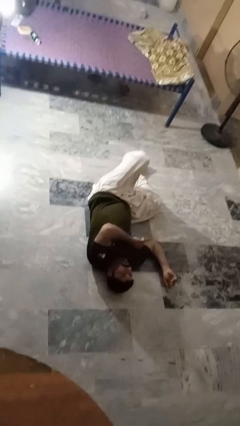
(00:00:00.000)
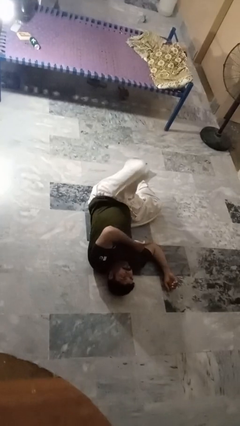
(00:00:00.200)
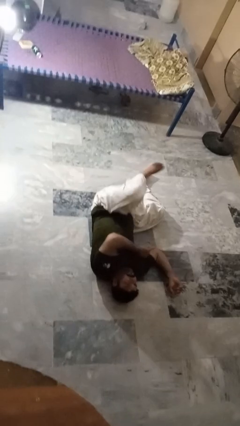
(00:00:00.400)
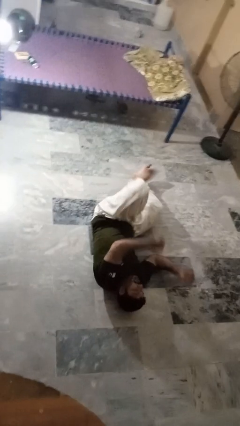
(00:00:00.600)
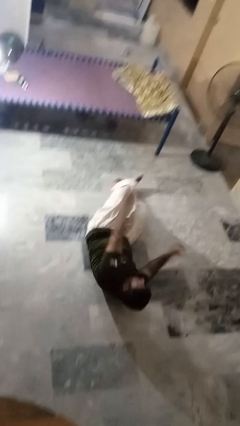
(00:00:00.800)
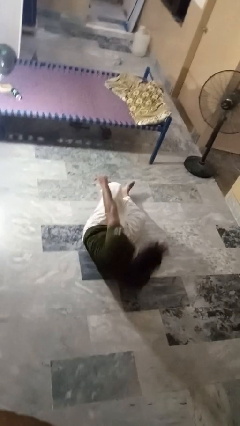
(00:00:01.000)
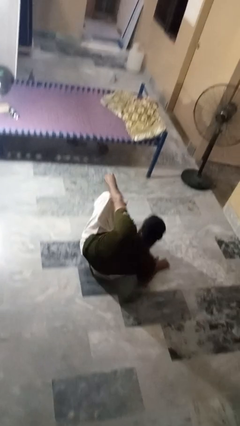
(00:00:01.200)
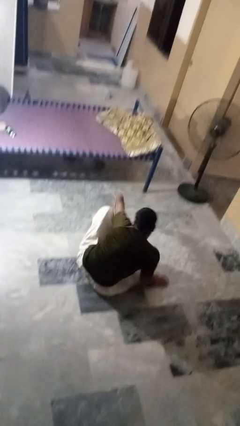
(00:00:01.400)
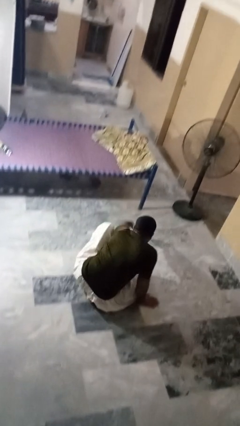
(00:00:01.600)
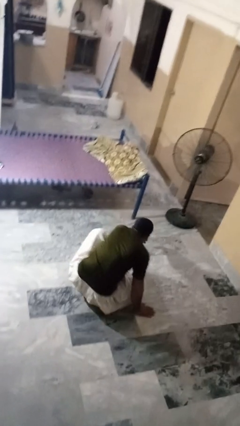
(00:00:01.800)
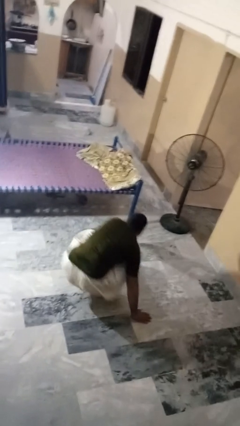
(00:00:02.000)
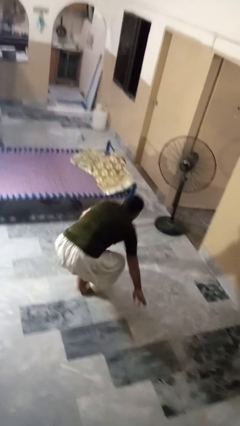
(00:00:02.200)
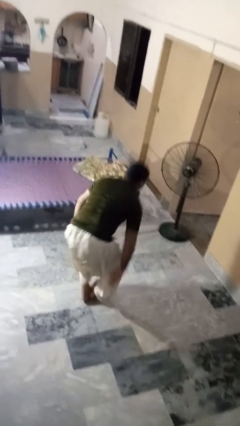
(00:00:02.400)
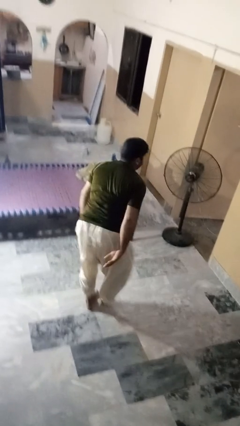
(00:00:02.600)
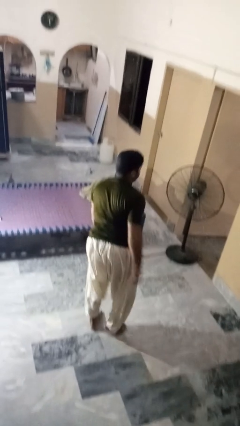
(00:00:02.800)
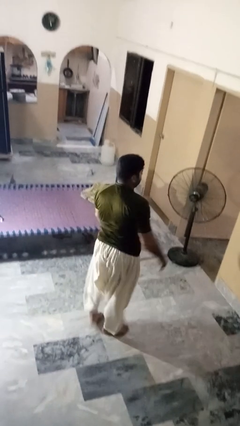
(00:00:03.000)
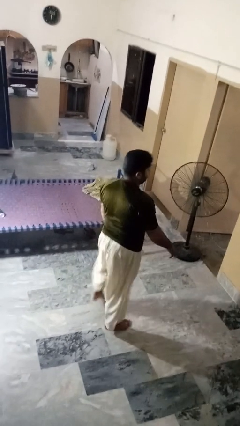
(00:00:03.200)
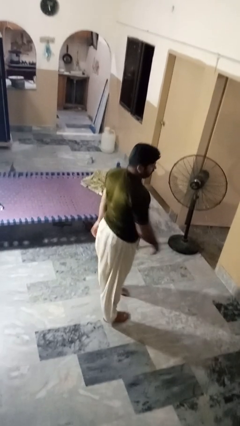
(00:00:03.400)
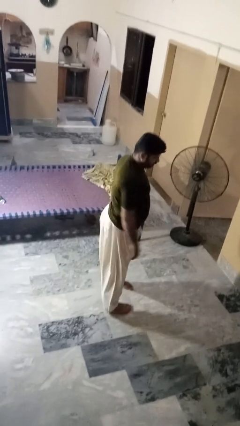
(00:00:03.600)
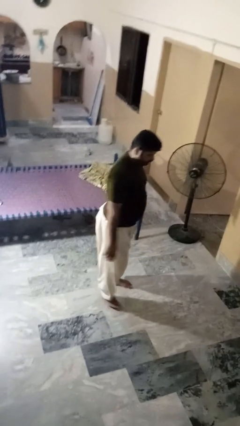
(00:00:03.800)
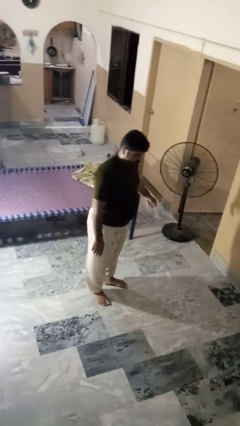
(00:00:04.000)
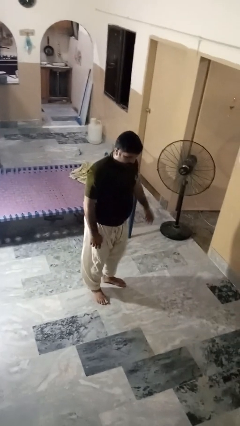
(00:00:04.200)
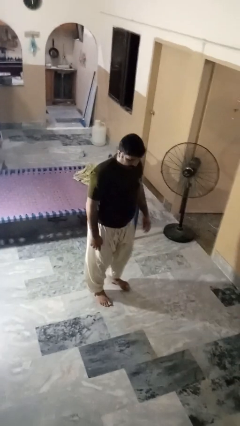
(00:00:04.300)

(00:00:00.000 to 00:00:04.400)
person stands up from floor

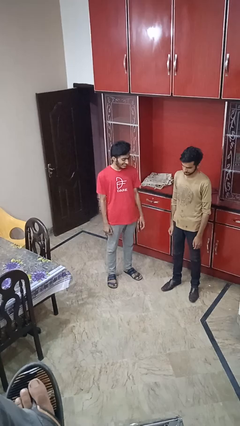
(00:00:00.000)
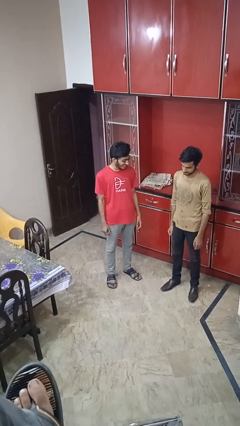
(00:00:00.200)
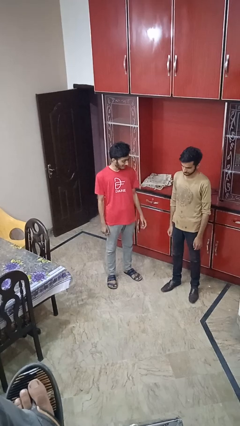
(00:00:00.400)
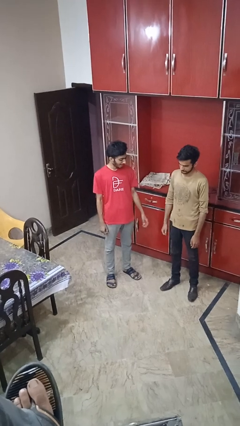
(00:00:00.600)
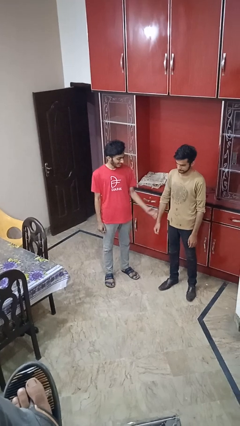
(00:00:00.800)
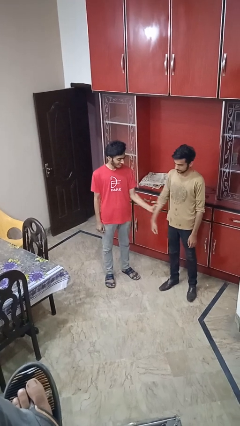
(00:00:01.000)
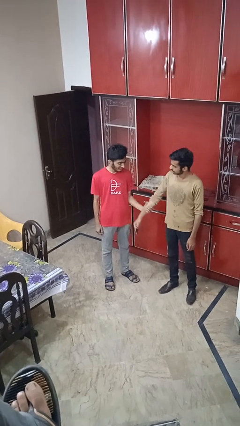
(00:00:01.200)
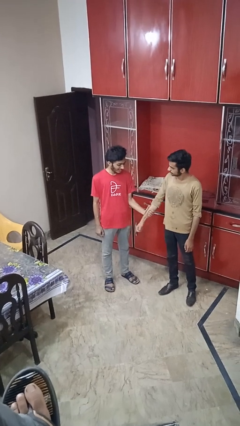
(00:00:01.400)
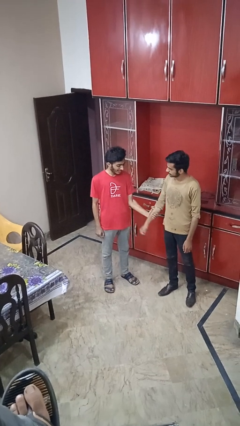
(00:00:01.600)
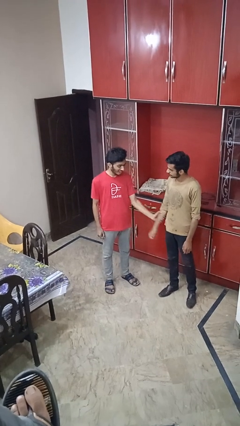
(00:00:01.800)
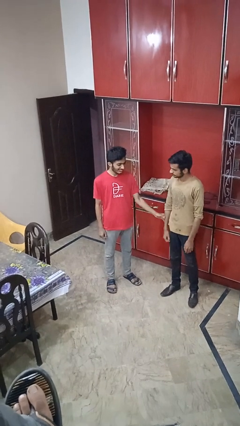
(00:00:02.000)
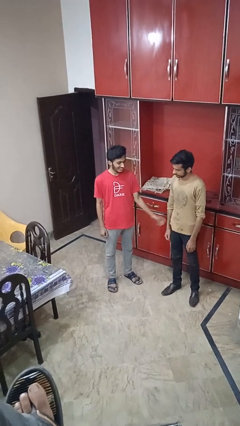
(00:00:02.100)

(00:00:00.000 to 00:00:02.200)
person grabs person by forearm

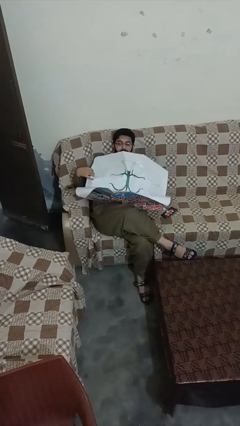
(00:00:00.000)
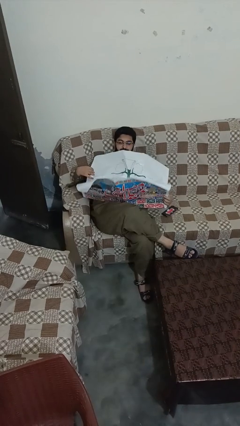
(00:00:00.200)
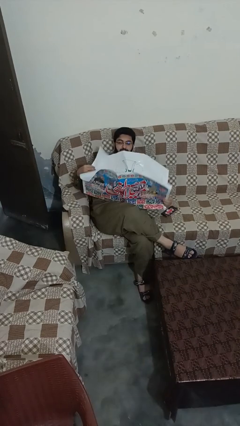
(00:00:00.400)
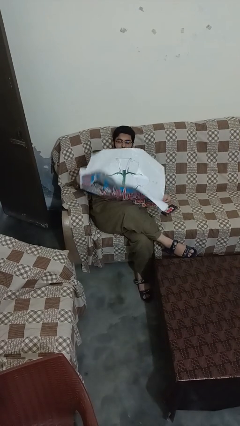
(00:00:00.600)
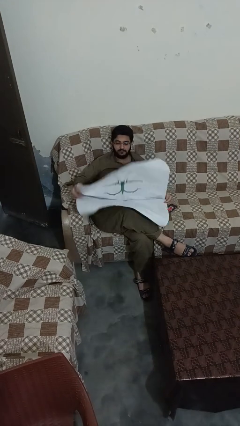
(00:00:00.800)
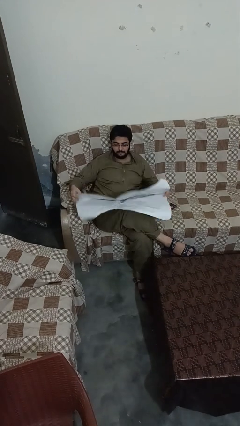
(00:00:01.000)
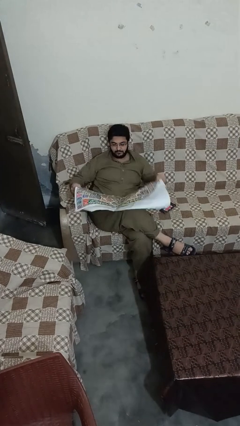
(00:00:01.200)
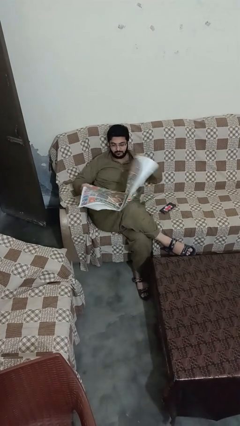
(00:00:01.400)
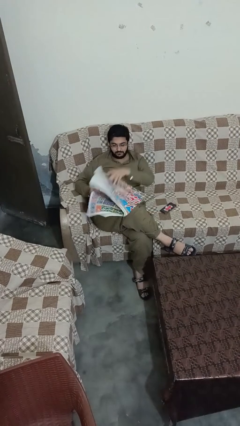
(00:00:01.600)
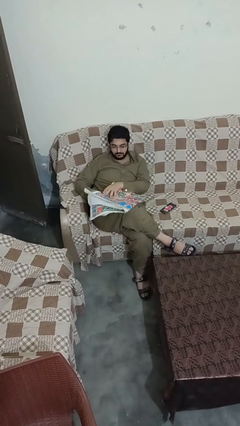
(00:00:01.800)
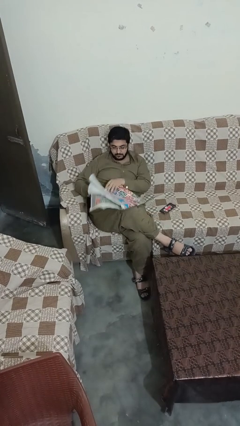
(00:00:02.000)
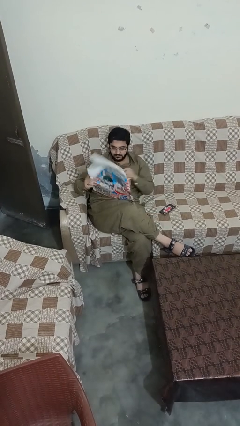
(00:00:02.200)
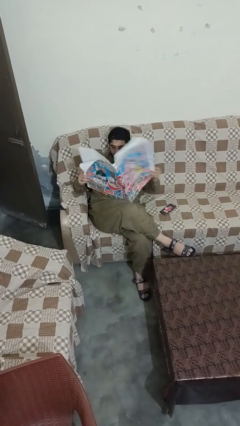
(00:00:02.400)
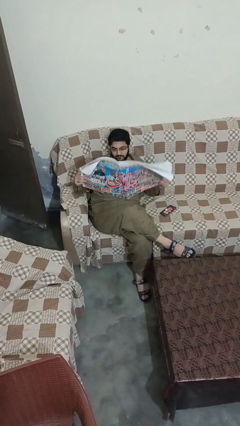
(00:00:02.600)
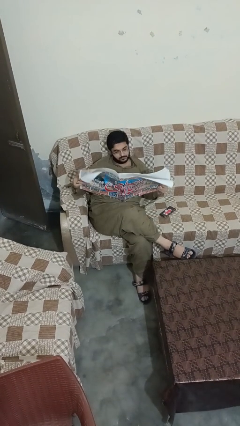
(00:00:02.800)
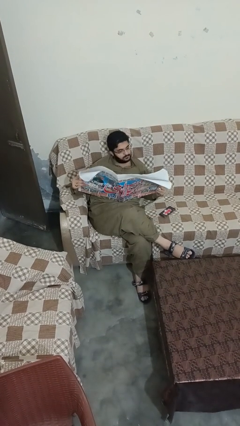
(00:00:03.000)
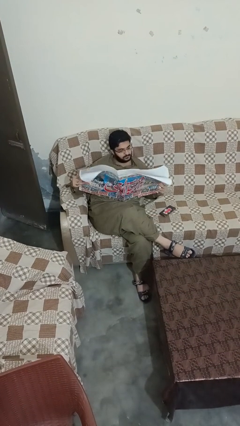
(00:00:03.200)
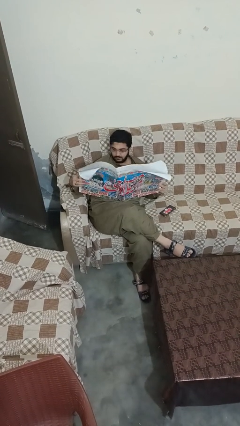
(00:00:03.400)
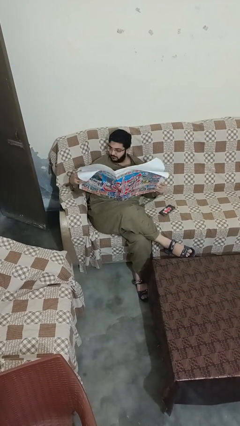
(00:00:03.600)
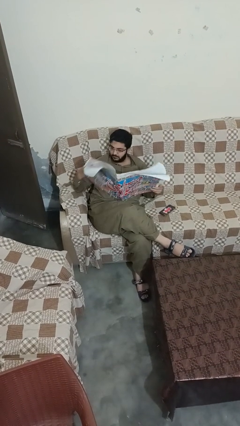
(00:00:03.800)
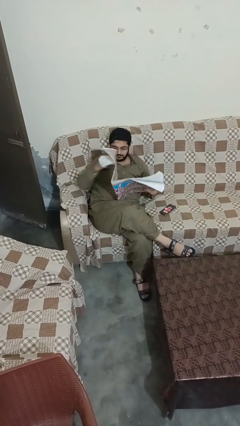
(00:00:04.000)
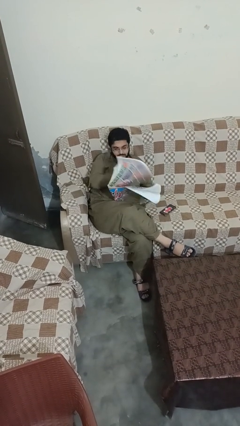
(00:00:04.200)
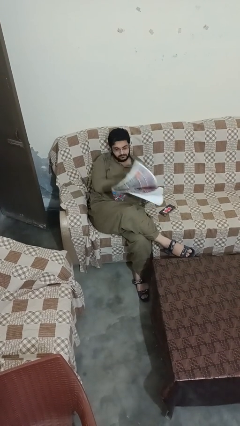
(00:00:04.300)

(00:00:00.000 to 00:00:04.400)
person reads newspaper

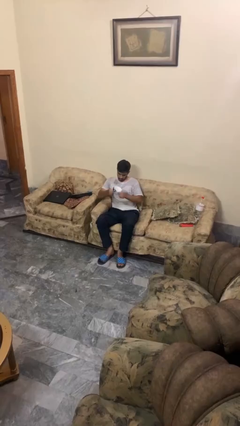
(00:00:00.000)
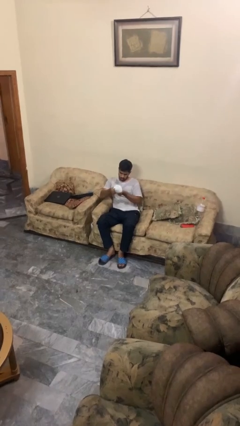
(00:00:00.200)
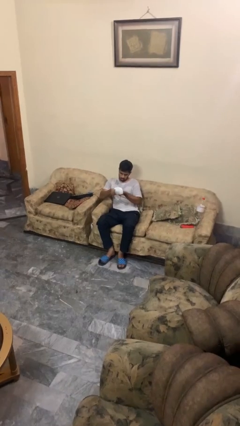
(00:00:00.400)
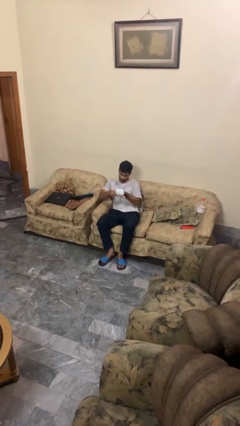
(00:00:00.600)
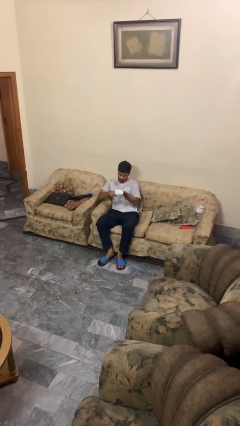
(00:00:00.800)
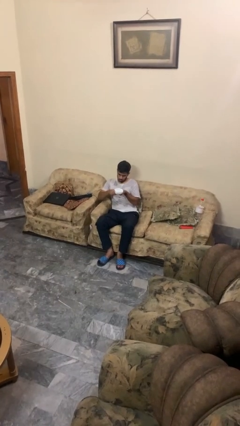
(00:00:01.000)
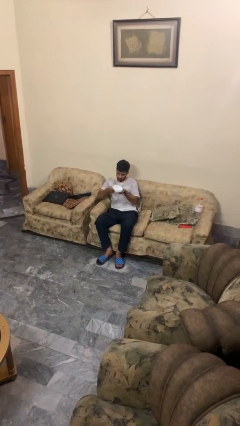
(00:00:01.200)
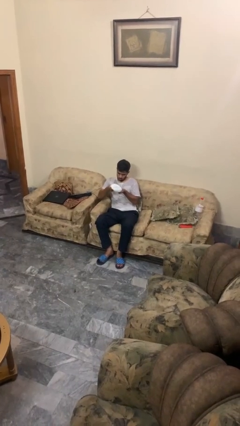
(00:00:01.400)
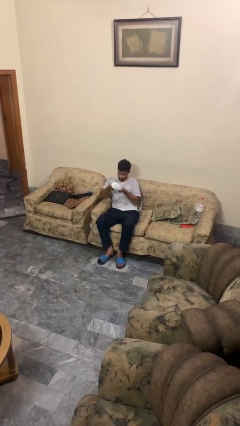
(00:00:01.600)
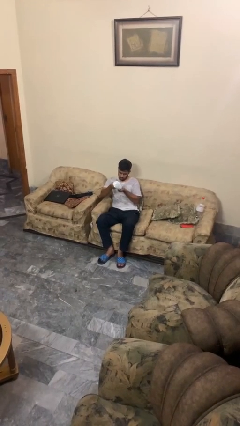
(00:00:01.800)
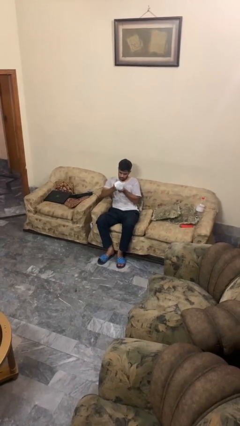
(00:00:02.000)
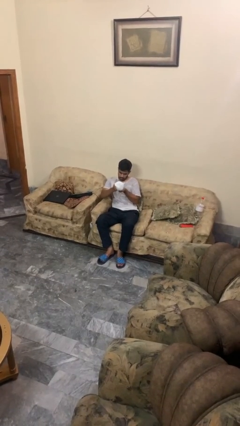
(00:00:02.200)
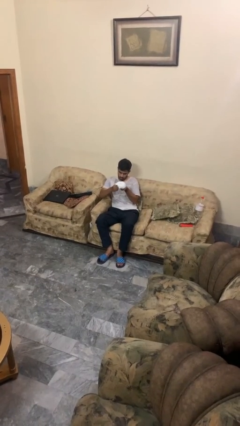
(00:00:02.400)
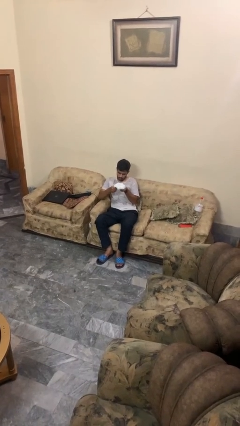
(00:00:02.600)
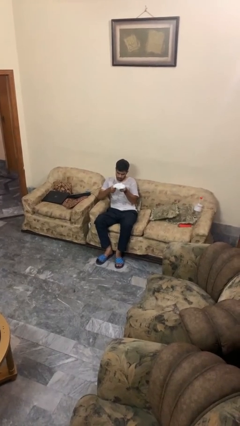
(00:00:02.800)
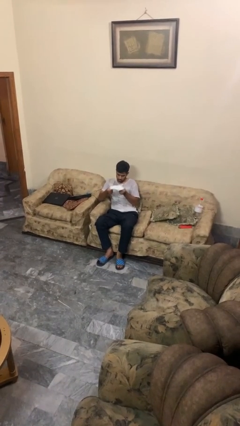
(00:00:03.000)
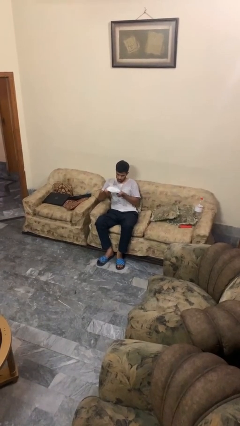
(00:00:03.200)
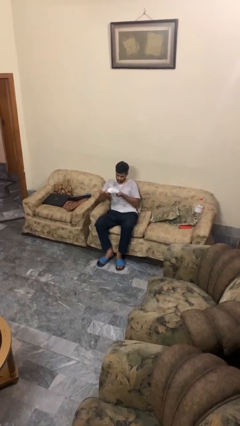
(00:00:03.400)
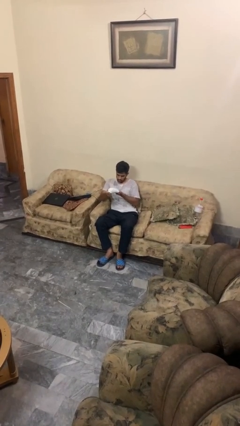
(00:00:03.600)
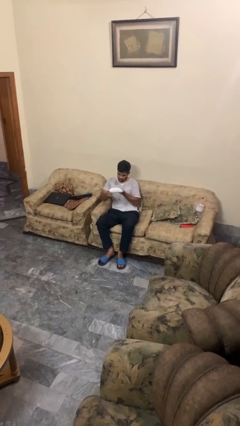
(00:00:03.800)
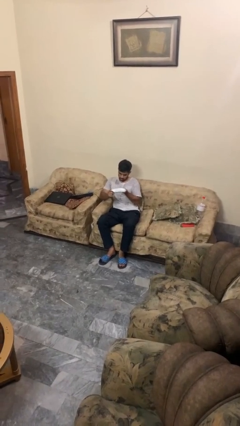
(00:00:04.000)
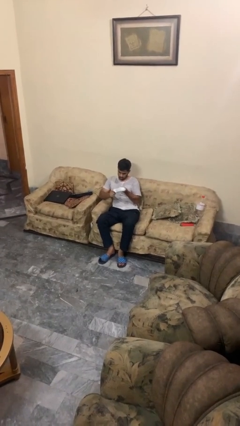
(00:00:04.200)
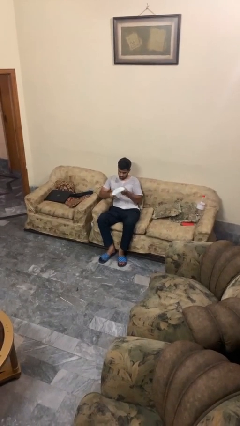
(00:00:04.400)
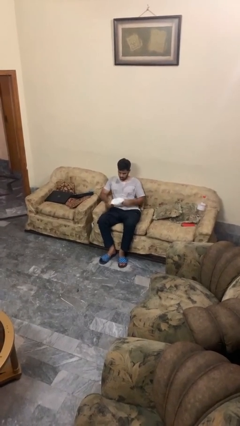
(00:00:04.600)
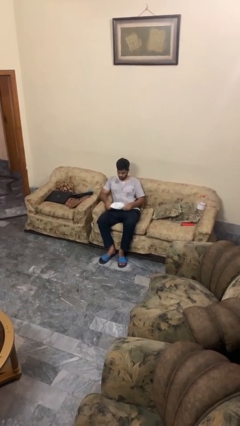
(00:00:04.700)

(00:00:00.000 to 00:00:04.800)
person squeezes object

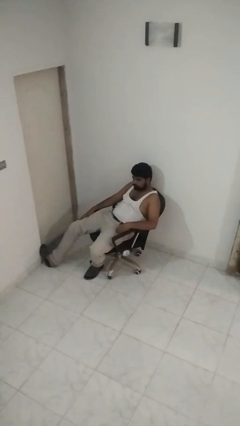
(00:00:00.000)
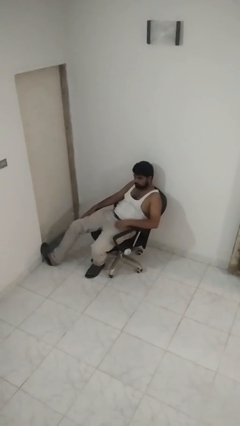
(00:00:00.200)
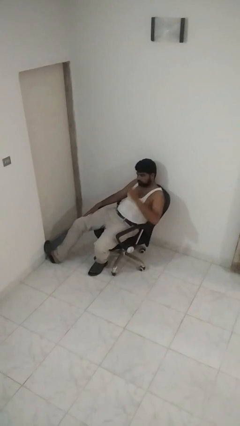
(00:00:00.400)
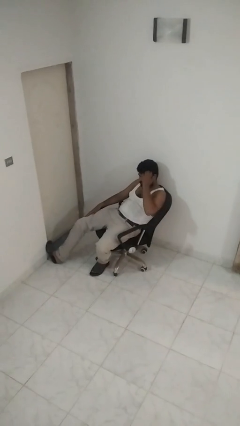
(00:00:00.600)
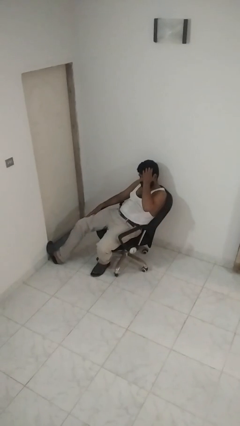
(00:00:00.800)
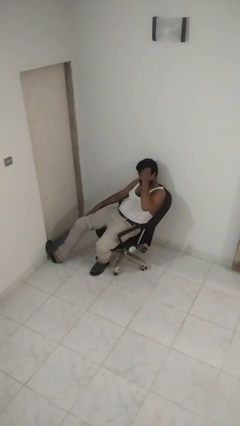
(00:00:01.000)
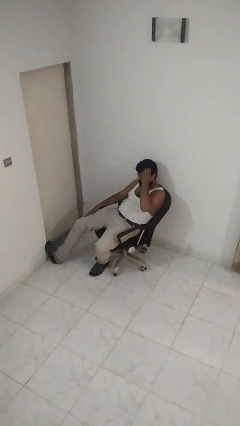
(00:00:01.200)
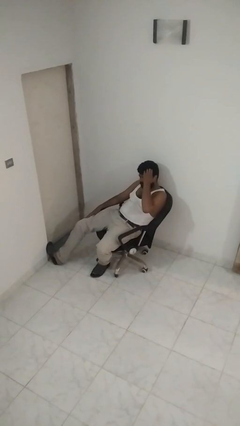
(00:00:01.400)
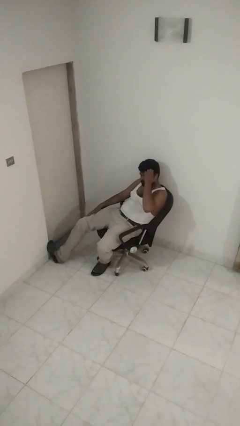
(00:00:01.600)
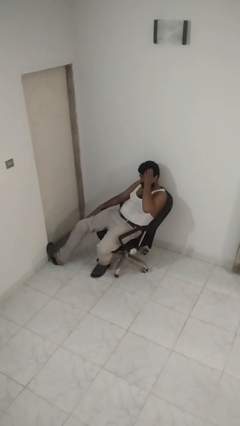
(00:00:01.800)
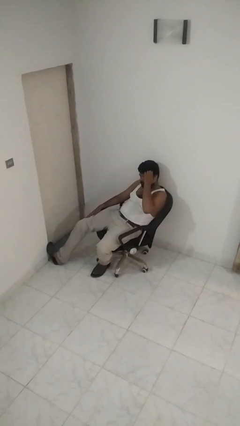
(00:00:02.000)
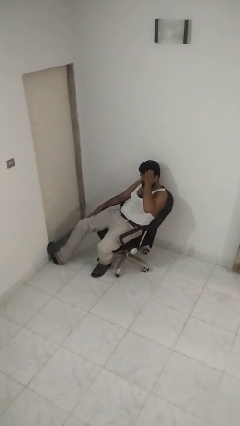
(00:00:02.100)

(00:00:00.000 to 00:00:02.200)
person scratches face
